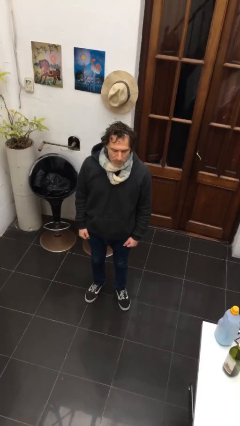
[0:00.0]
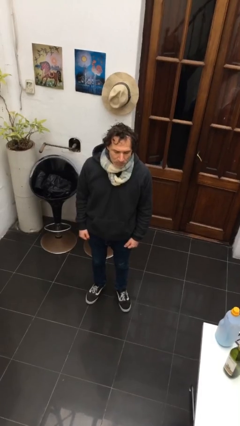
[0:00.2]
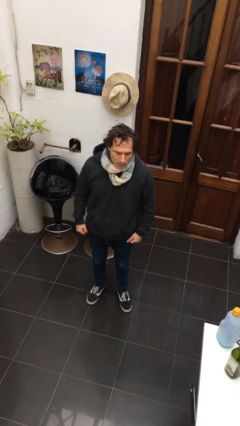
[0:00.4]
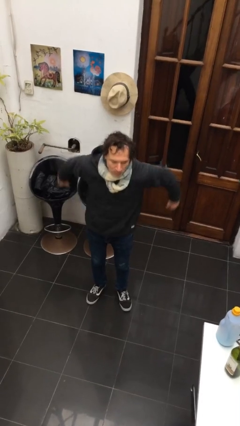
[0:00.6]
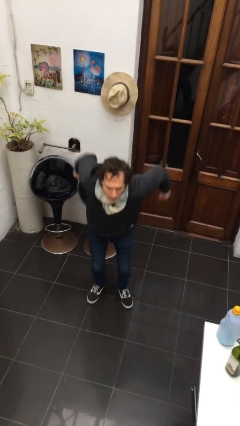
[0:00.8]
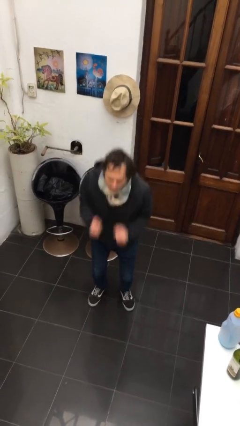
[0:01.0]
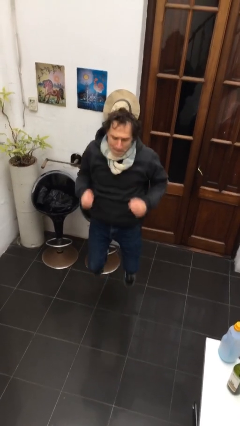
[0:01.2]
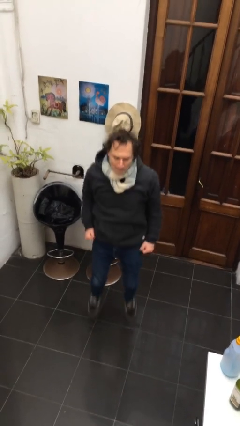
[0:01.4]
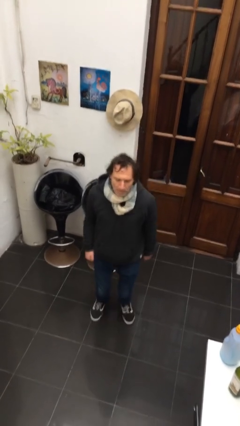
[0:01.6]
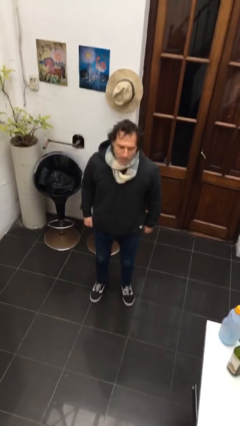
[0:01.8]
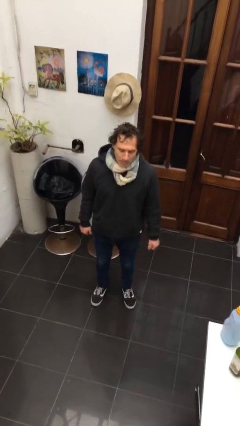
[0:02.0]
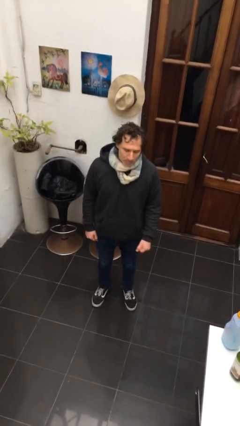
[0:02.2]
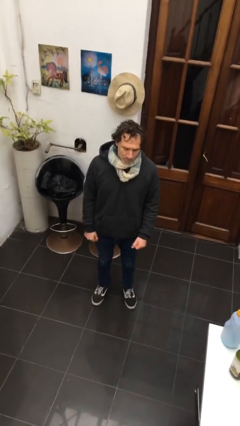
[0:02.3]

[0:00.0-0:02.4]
person jumps

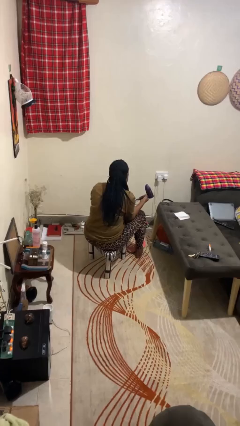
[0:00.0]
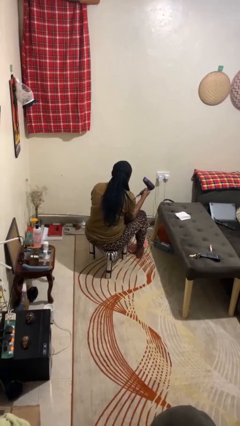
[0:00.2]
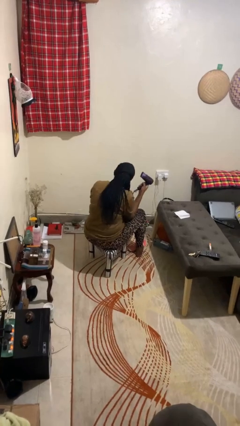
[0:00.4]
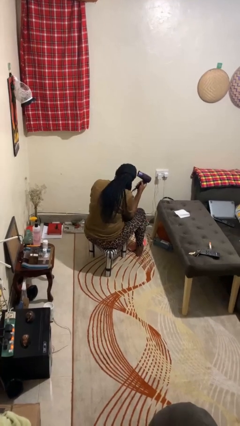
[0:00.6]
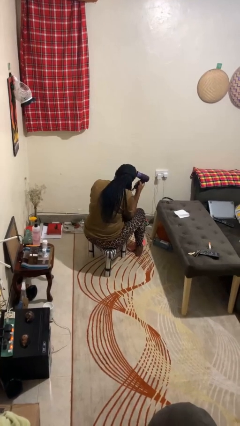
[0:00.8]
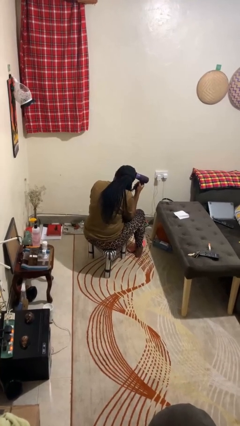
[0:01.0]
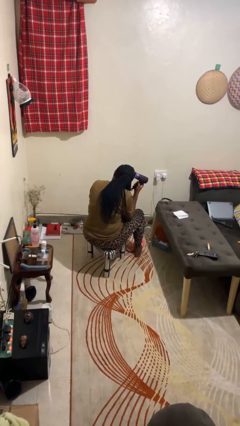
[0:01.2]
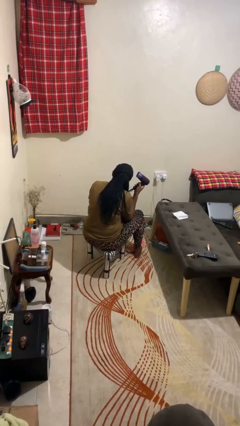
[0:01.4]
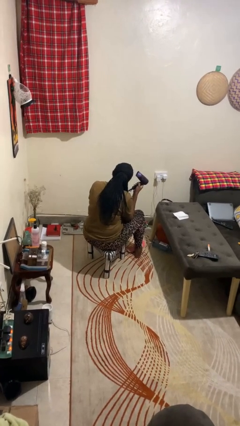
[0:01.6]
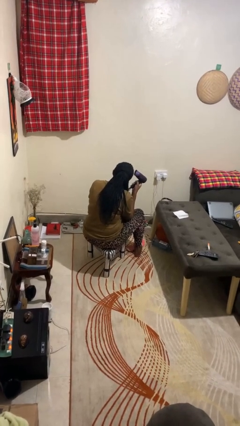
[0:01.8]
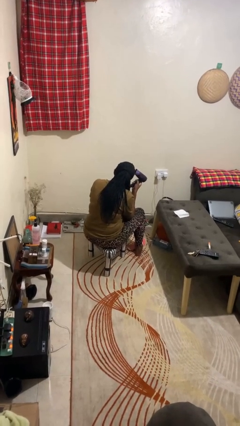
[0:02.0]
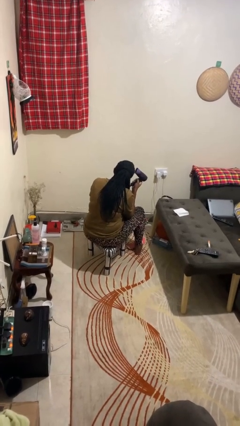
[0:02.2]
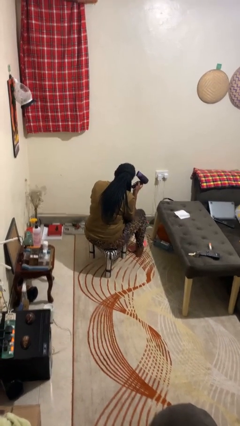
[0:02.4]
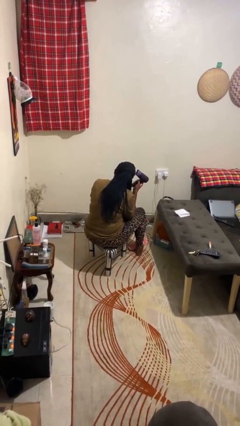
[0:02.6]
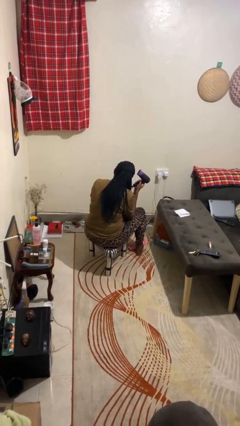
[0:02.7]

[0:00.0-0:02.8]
person dries hair with hairdryer

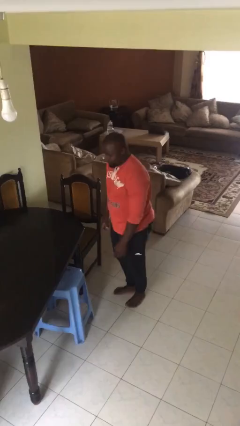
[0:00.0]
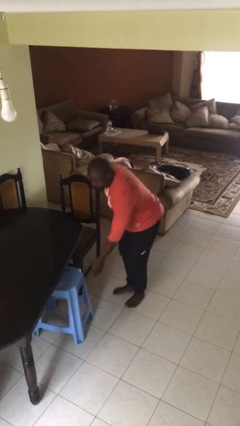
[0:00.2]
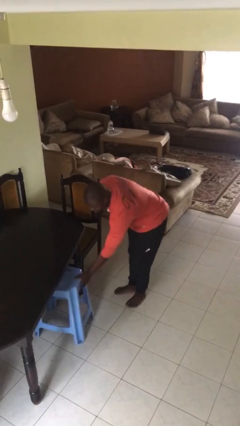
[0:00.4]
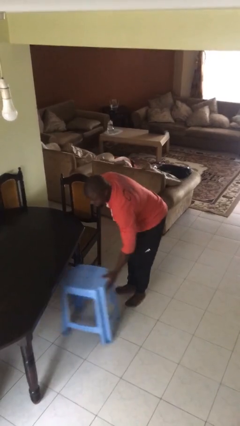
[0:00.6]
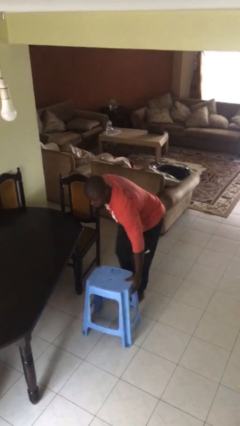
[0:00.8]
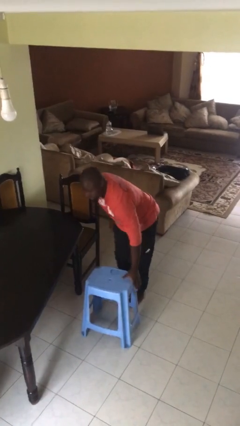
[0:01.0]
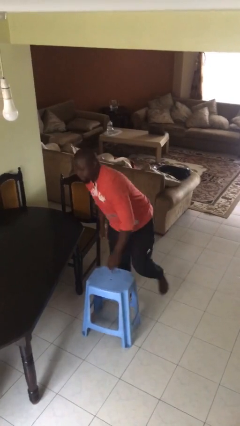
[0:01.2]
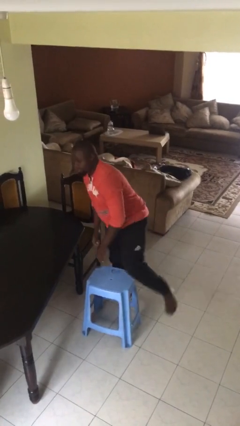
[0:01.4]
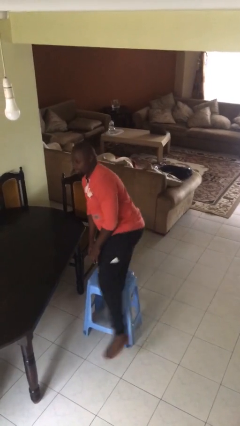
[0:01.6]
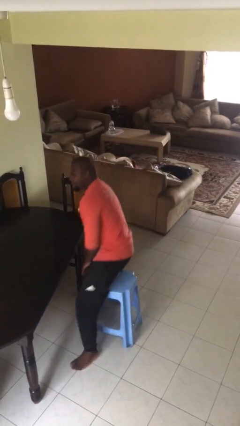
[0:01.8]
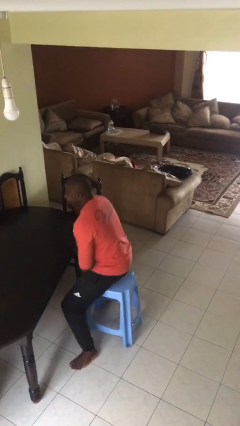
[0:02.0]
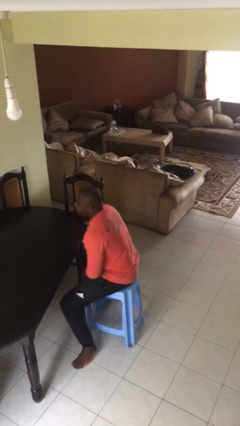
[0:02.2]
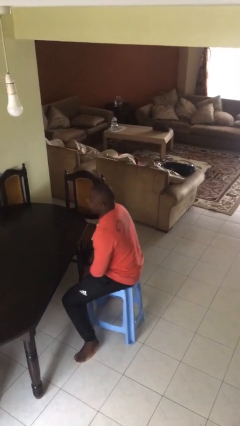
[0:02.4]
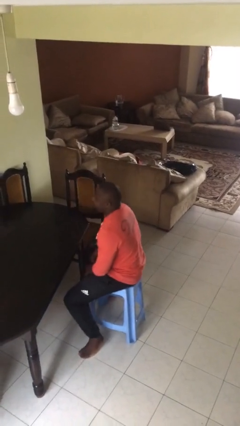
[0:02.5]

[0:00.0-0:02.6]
person sits down

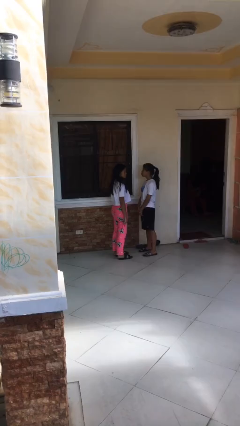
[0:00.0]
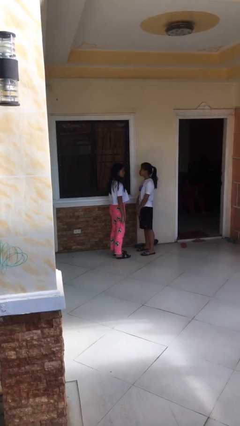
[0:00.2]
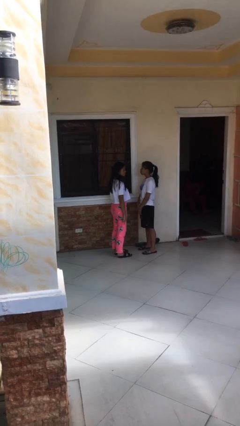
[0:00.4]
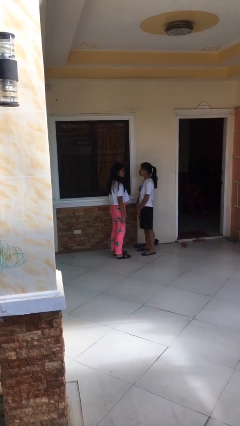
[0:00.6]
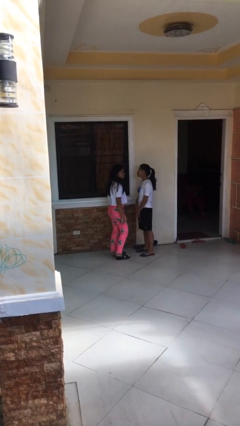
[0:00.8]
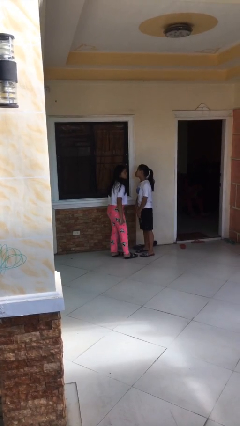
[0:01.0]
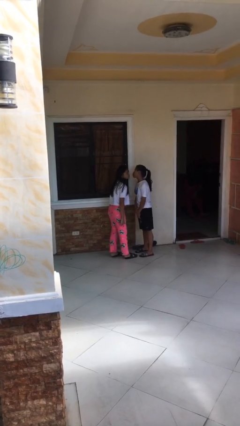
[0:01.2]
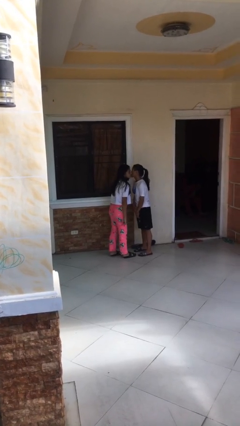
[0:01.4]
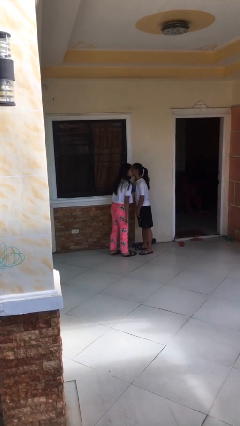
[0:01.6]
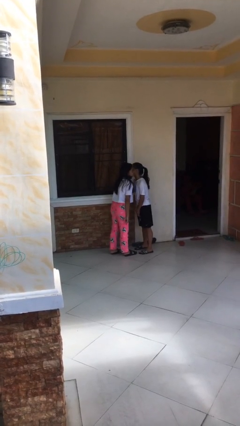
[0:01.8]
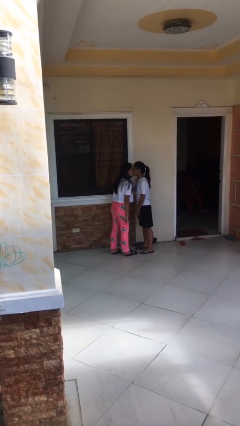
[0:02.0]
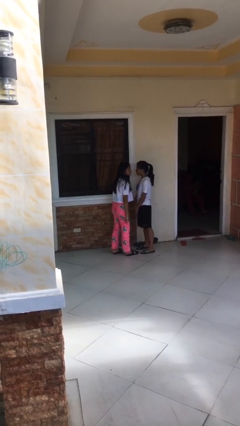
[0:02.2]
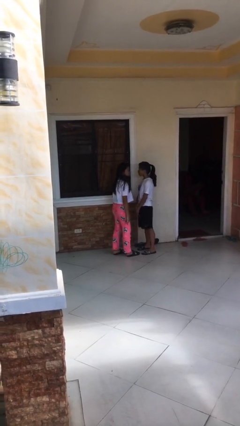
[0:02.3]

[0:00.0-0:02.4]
person kisses cheek of person

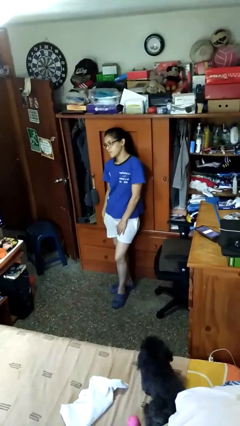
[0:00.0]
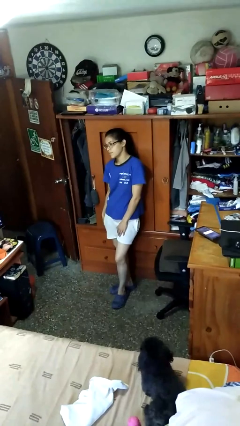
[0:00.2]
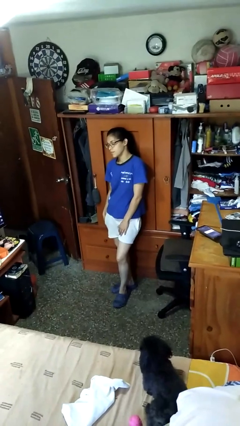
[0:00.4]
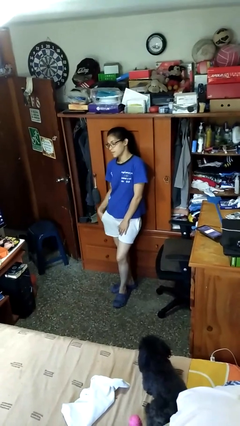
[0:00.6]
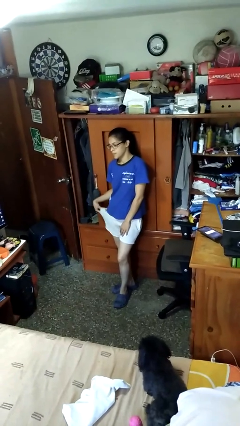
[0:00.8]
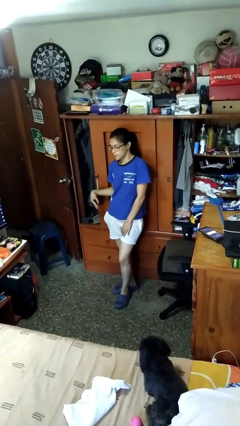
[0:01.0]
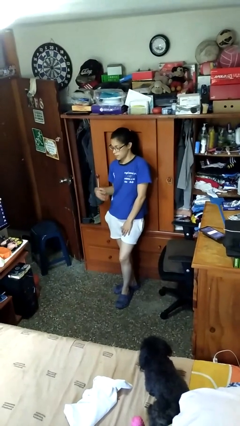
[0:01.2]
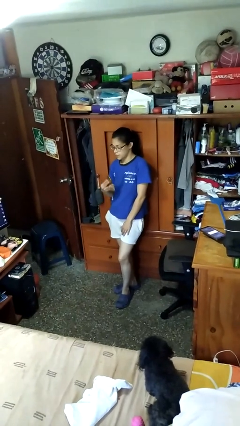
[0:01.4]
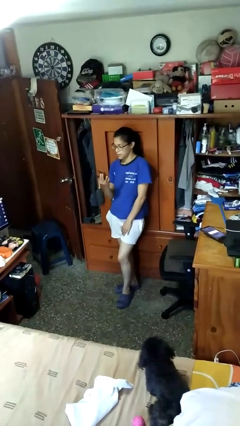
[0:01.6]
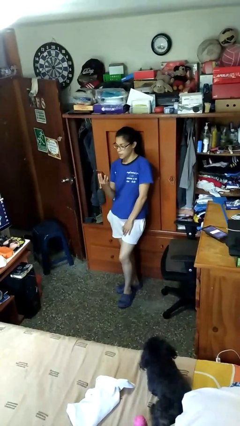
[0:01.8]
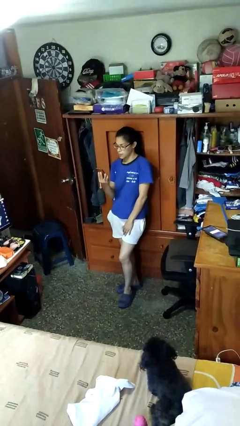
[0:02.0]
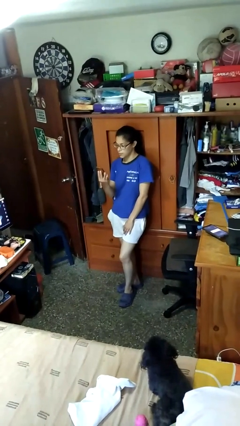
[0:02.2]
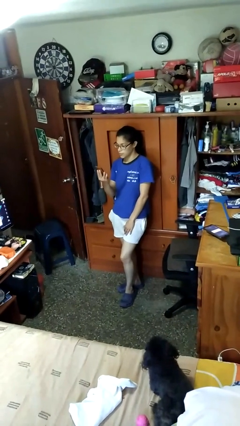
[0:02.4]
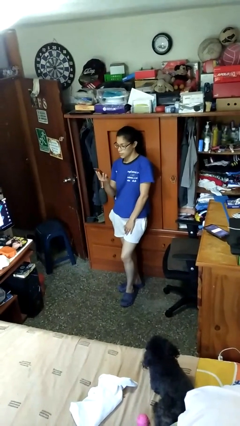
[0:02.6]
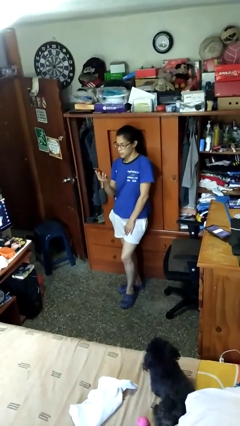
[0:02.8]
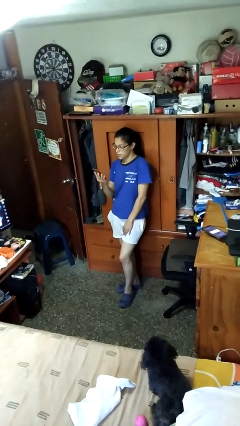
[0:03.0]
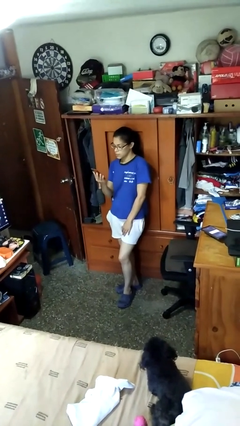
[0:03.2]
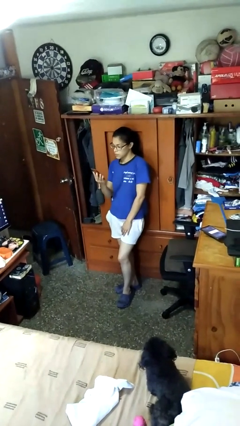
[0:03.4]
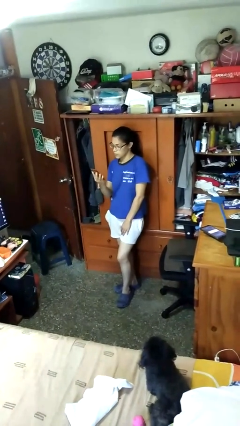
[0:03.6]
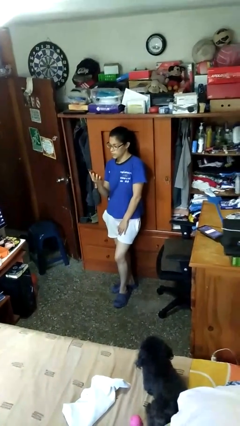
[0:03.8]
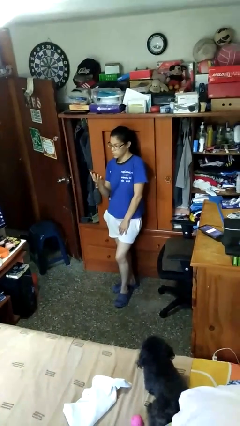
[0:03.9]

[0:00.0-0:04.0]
person takes phone from pocket

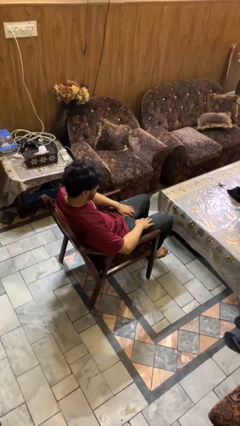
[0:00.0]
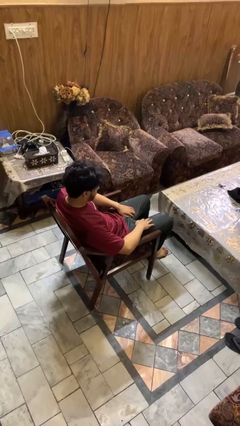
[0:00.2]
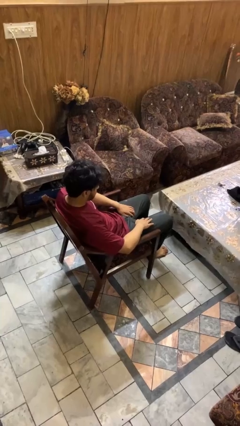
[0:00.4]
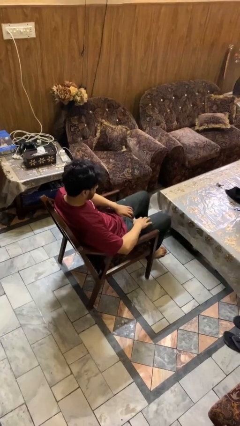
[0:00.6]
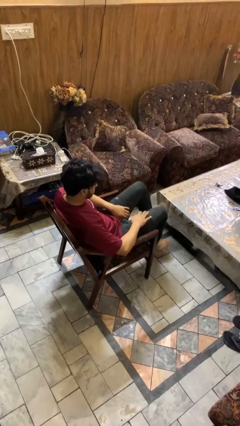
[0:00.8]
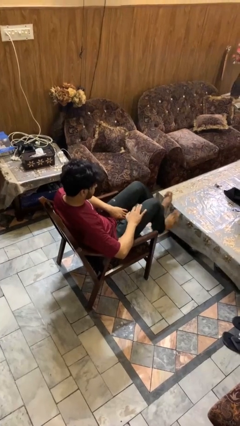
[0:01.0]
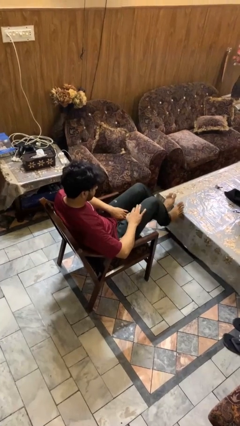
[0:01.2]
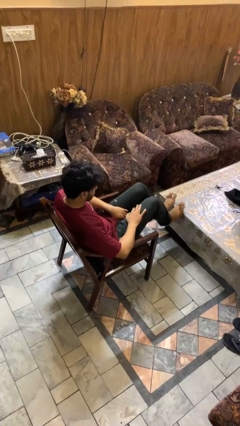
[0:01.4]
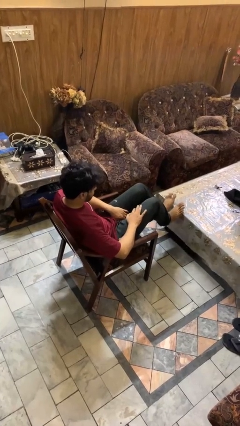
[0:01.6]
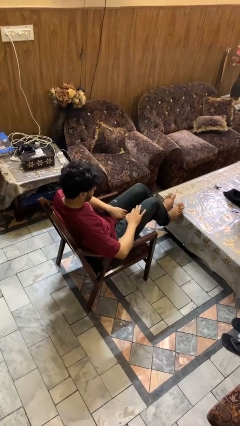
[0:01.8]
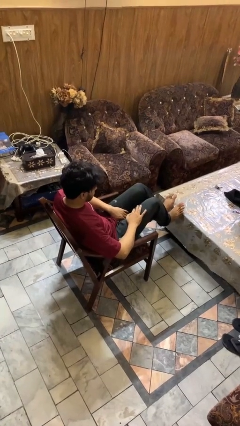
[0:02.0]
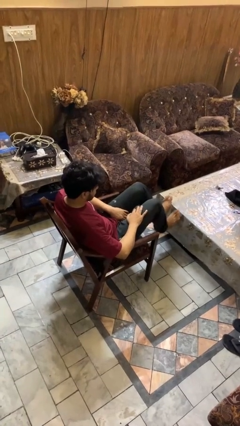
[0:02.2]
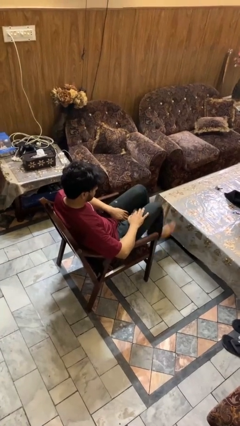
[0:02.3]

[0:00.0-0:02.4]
person puts feet up

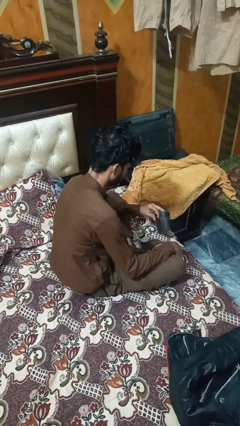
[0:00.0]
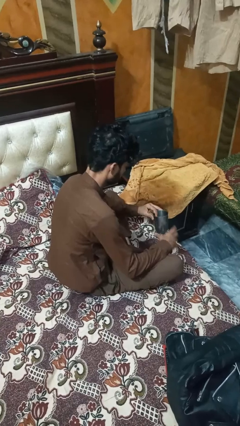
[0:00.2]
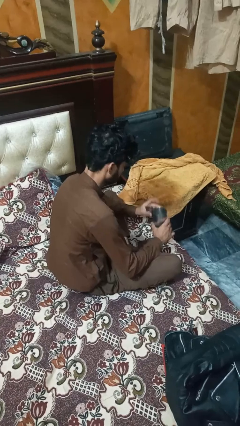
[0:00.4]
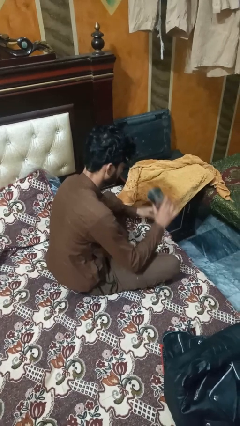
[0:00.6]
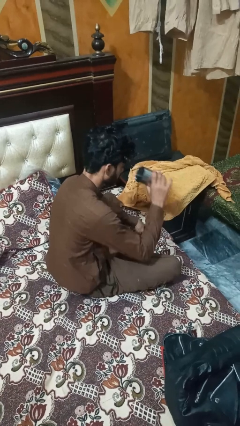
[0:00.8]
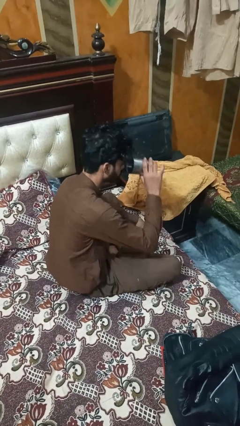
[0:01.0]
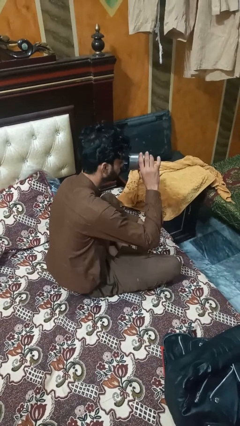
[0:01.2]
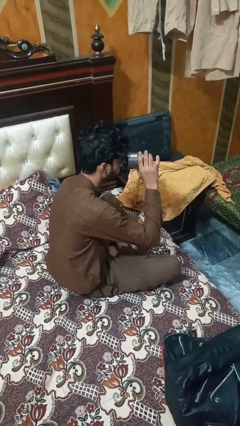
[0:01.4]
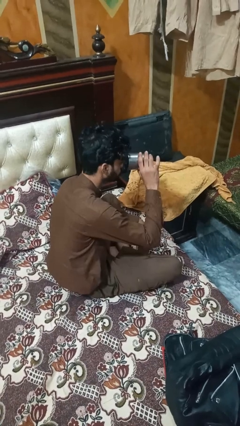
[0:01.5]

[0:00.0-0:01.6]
person drinks from mug
